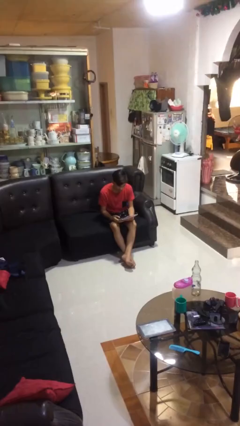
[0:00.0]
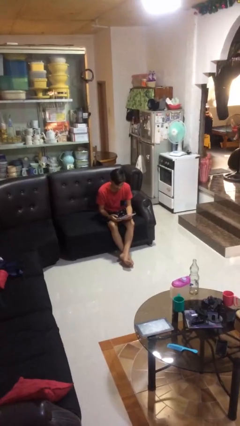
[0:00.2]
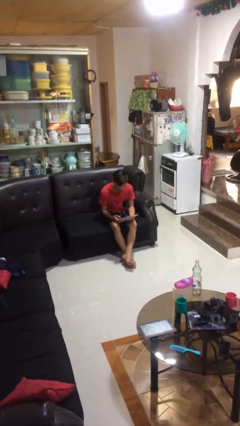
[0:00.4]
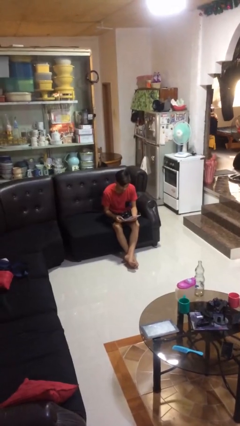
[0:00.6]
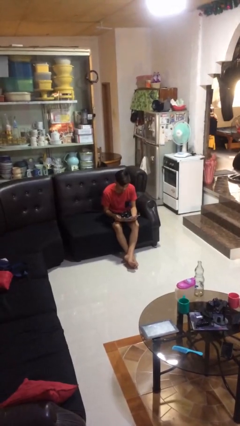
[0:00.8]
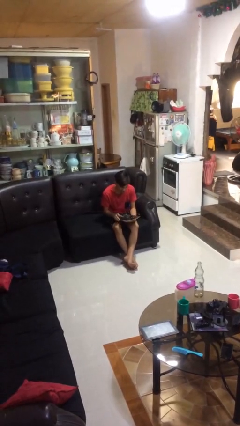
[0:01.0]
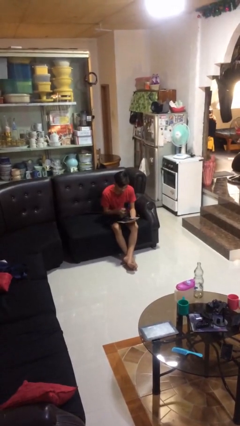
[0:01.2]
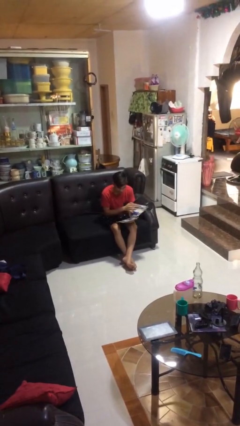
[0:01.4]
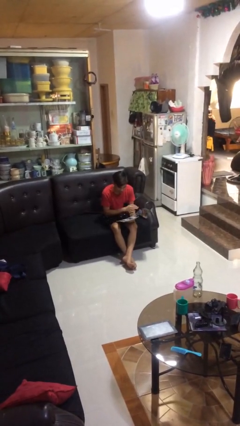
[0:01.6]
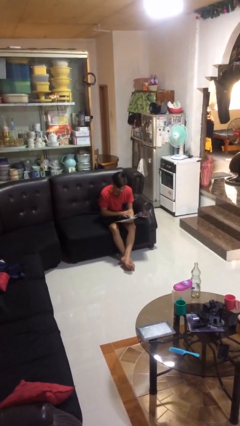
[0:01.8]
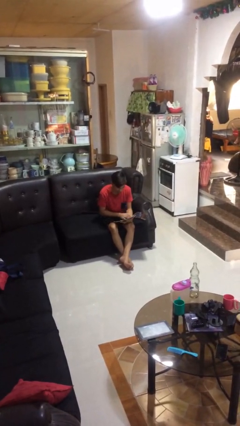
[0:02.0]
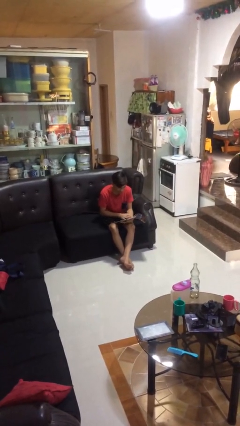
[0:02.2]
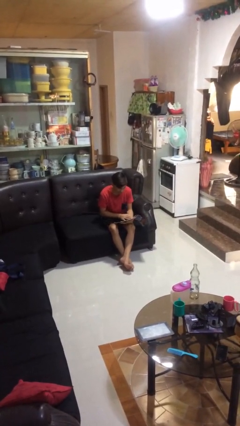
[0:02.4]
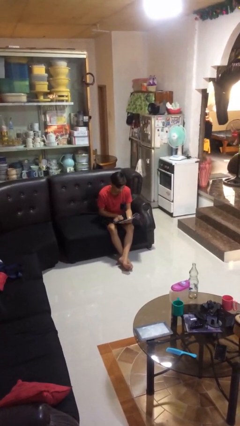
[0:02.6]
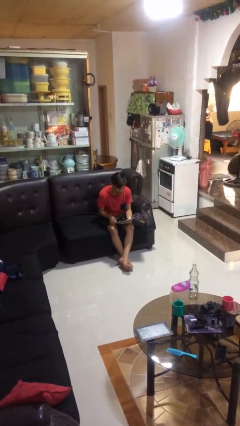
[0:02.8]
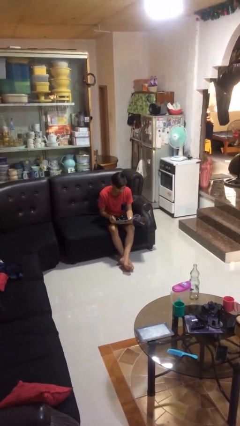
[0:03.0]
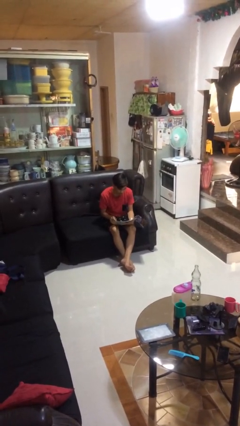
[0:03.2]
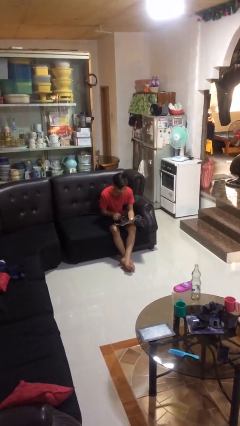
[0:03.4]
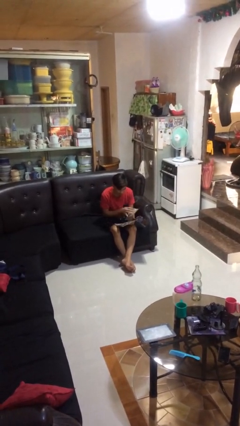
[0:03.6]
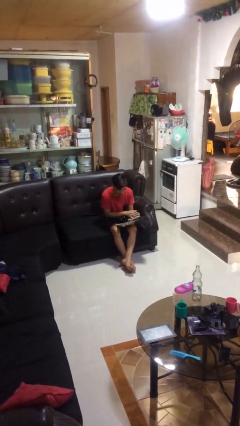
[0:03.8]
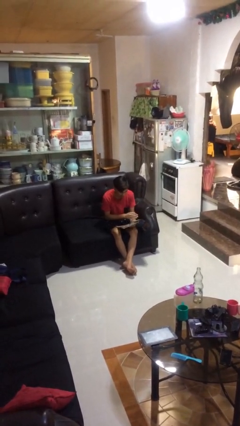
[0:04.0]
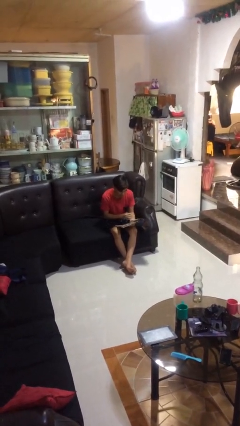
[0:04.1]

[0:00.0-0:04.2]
person reads magazine

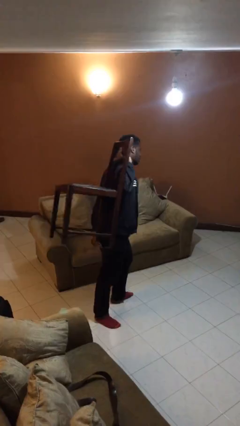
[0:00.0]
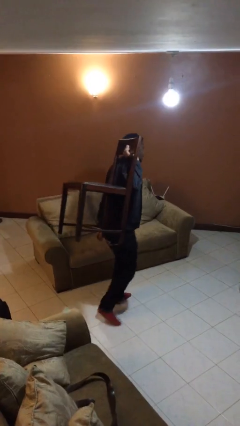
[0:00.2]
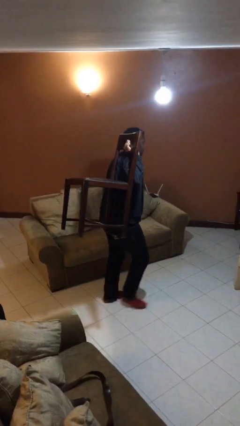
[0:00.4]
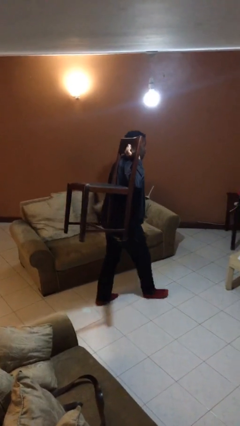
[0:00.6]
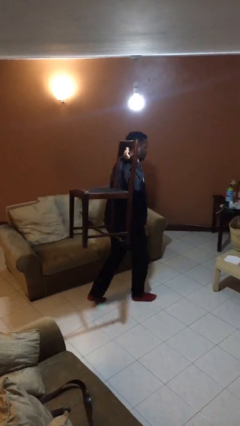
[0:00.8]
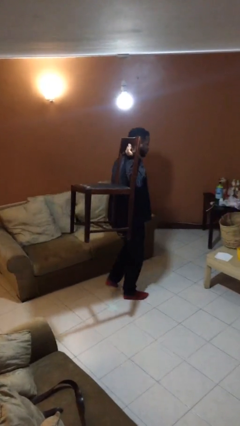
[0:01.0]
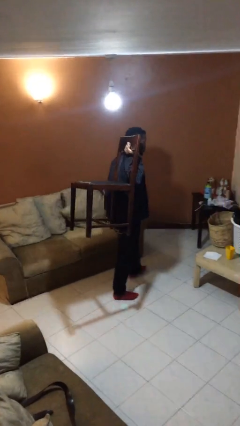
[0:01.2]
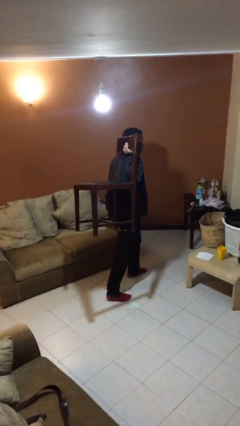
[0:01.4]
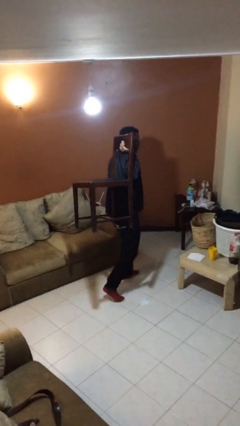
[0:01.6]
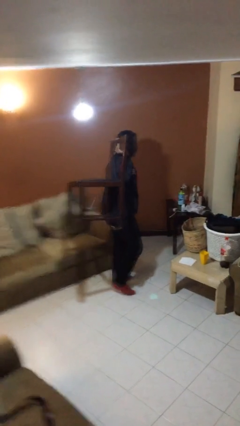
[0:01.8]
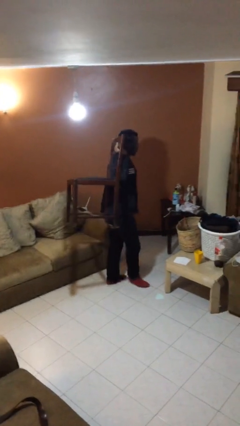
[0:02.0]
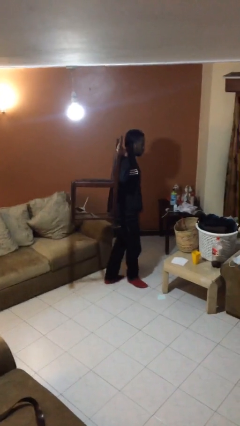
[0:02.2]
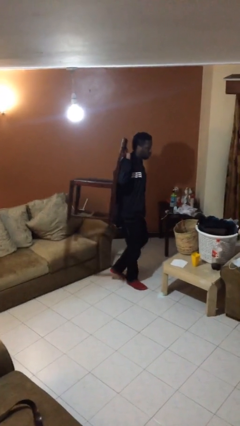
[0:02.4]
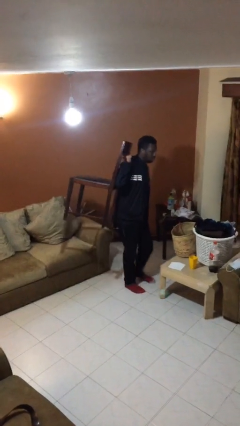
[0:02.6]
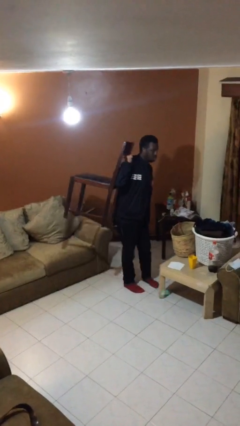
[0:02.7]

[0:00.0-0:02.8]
person carries furniture

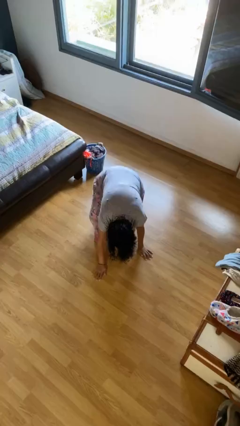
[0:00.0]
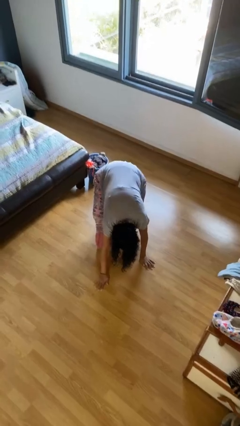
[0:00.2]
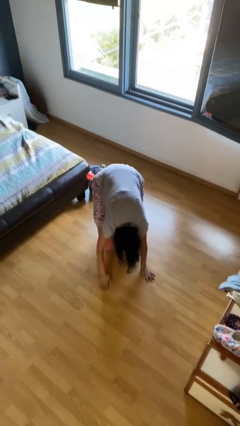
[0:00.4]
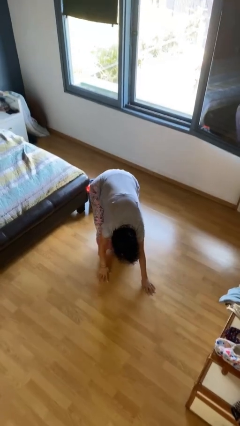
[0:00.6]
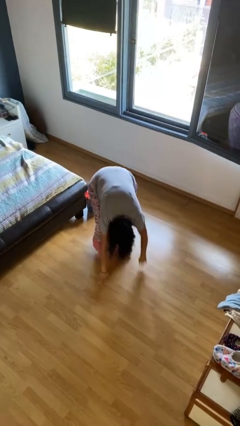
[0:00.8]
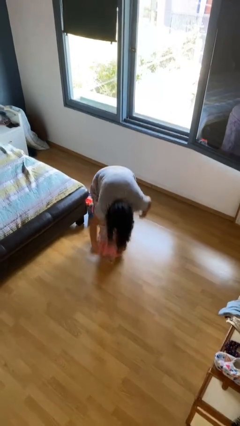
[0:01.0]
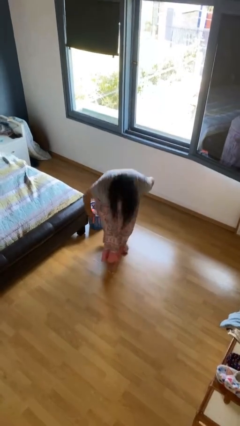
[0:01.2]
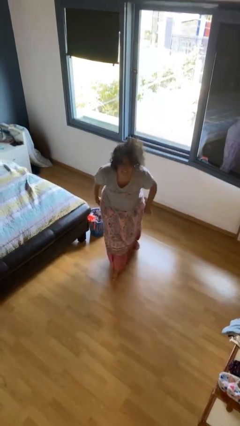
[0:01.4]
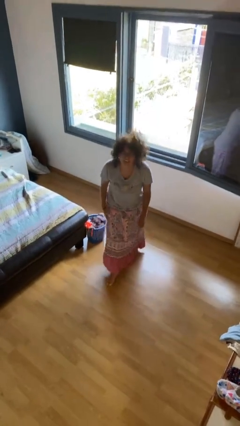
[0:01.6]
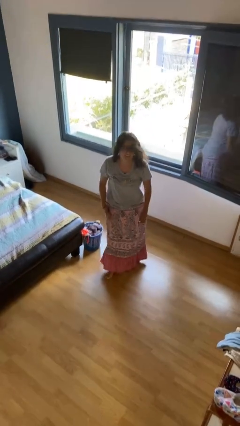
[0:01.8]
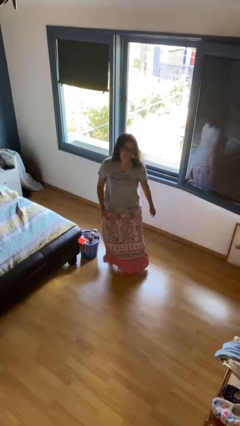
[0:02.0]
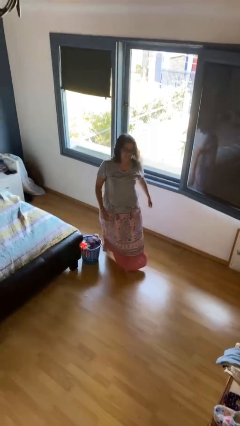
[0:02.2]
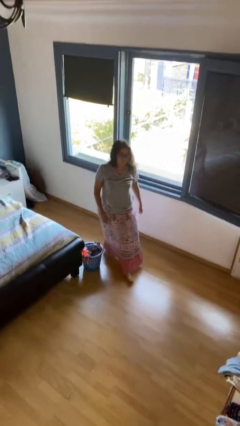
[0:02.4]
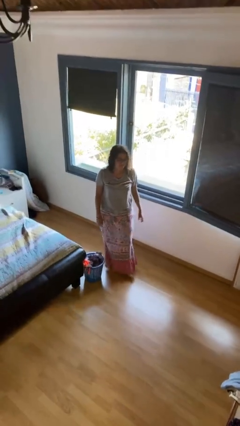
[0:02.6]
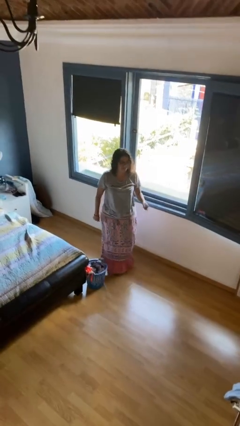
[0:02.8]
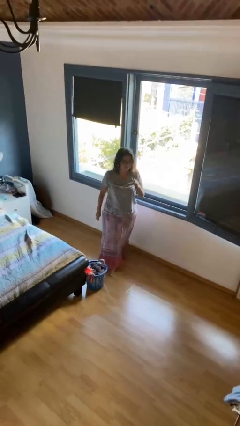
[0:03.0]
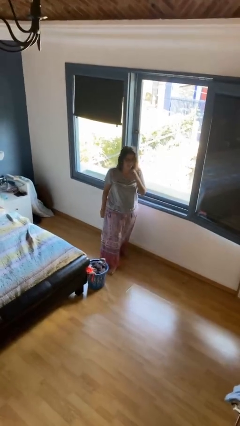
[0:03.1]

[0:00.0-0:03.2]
person stands up from floor

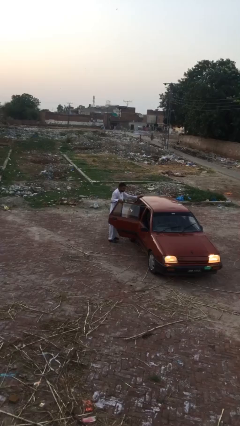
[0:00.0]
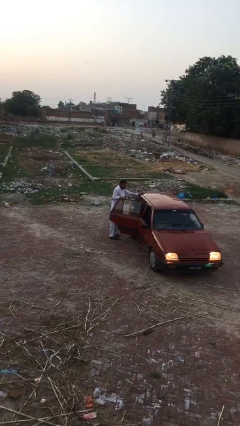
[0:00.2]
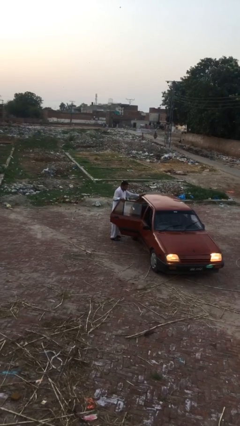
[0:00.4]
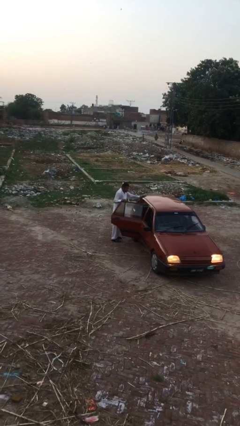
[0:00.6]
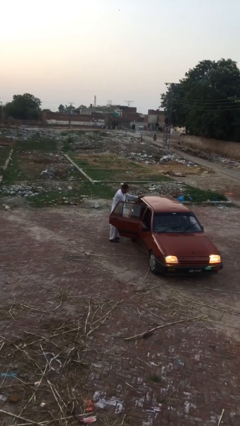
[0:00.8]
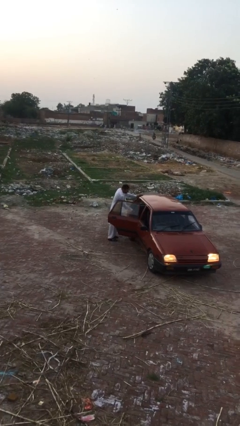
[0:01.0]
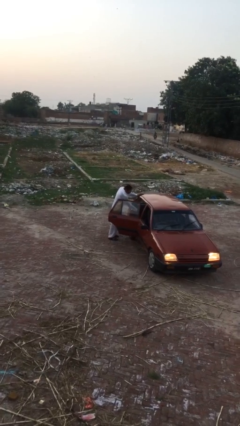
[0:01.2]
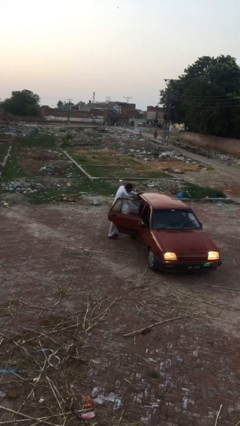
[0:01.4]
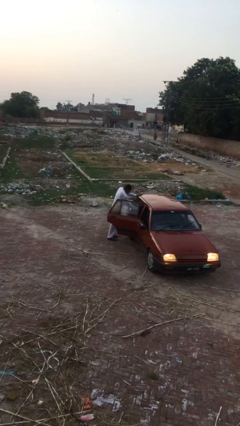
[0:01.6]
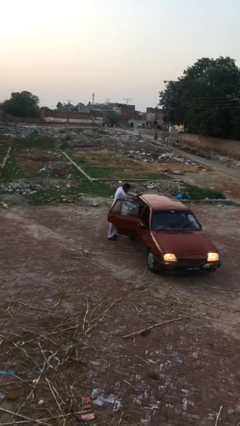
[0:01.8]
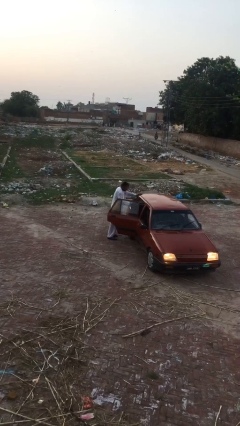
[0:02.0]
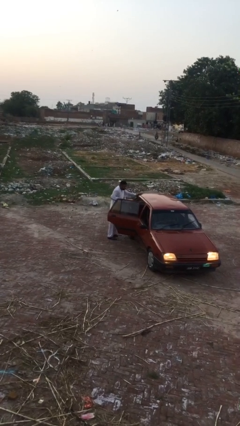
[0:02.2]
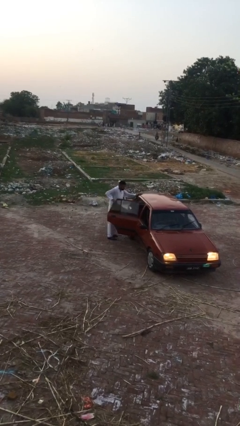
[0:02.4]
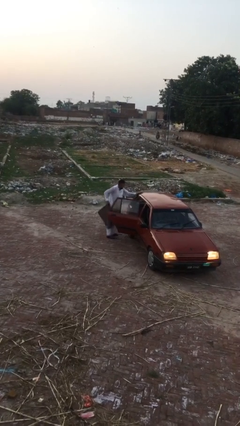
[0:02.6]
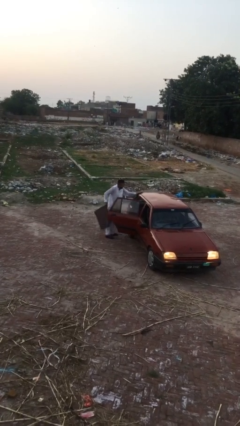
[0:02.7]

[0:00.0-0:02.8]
person unloads car

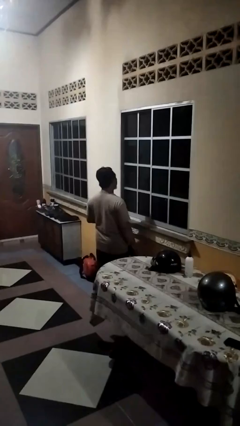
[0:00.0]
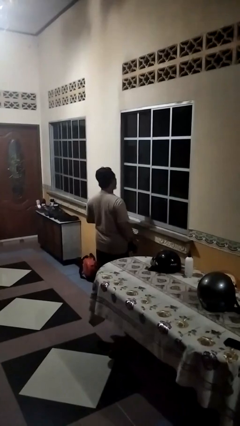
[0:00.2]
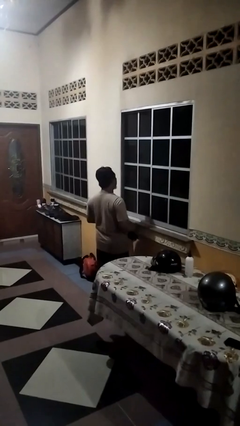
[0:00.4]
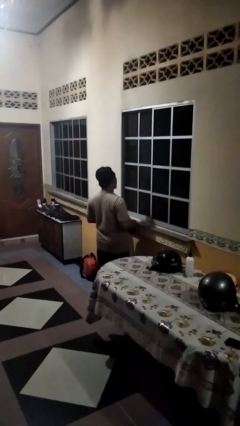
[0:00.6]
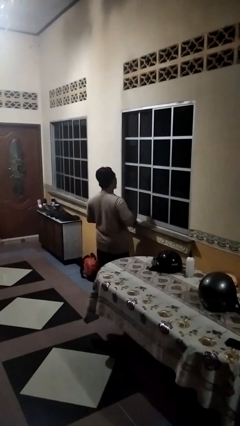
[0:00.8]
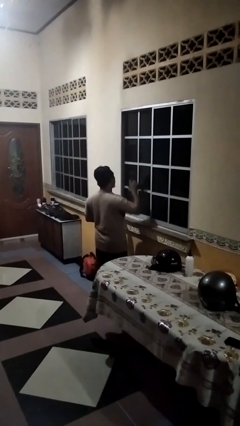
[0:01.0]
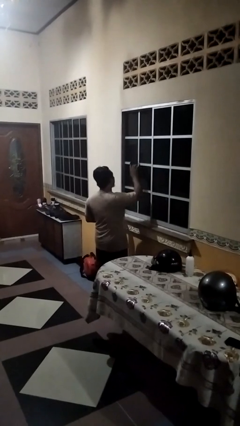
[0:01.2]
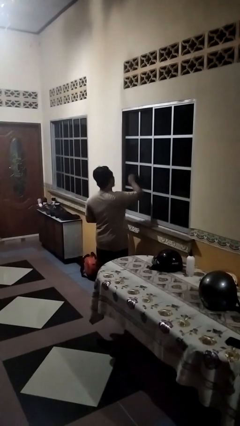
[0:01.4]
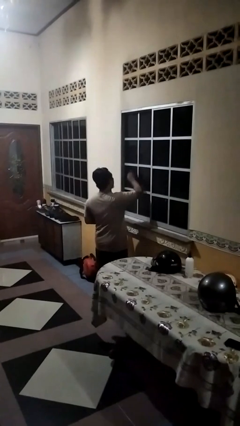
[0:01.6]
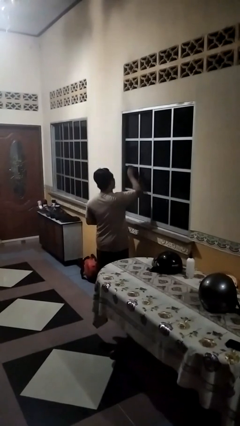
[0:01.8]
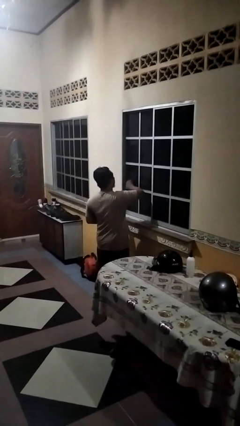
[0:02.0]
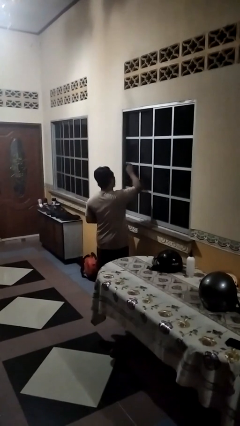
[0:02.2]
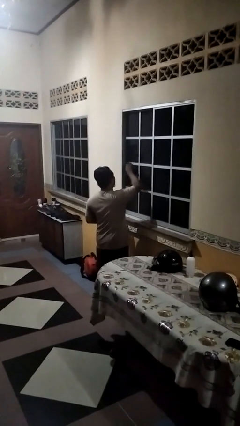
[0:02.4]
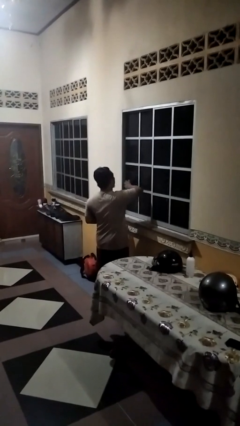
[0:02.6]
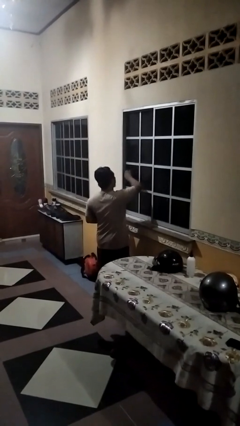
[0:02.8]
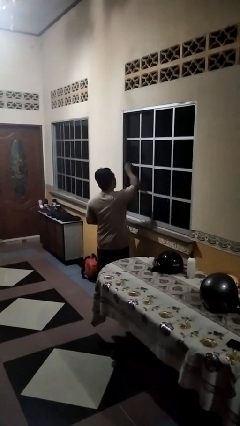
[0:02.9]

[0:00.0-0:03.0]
person washes window

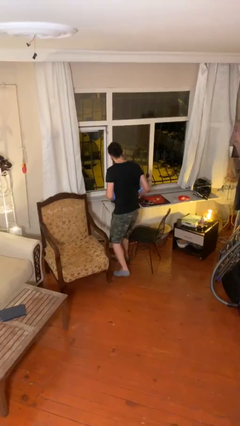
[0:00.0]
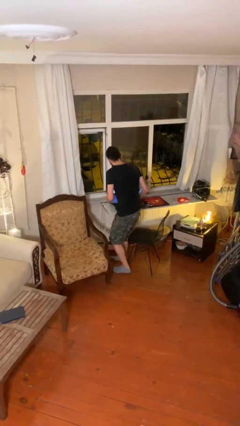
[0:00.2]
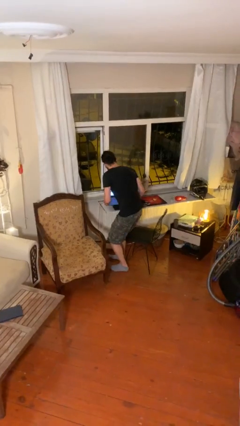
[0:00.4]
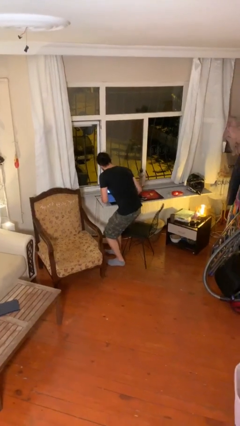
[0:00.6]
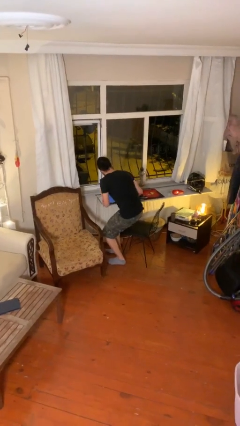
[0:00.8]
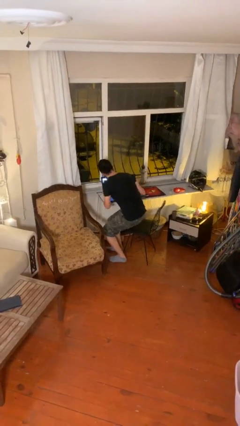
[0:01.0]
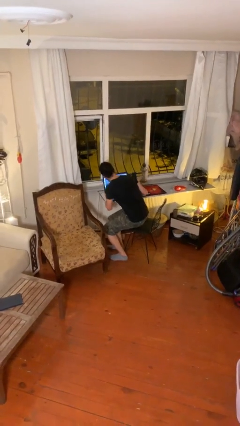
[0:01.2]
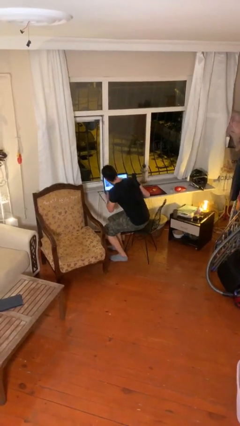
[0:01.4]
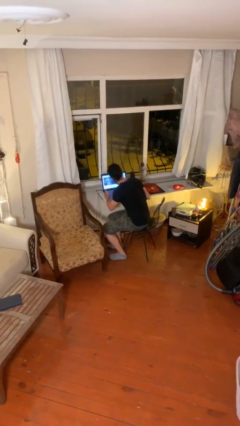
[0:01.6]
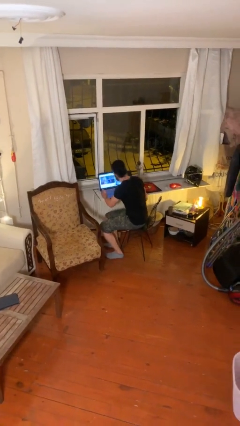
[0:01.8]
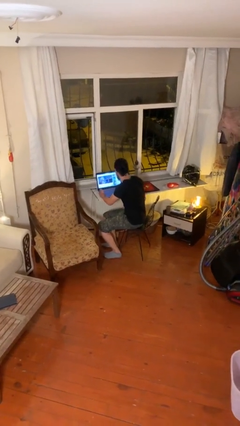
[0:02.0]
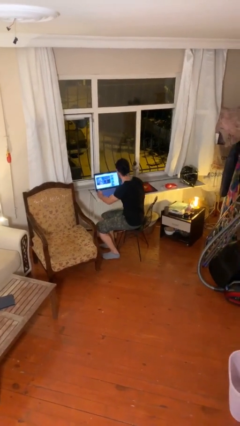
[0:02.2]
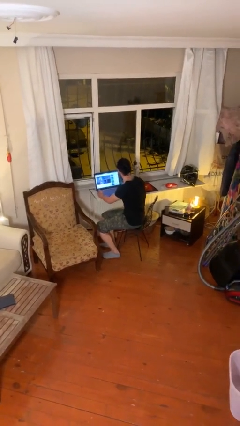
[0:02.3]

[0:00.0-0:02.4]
person sits down
